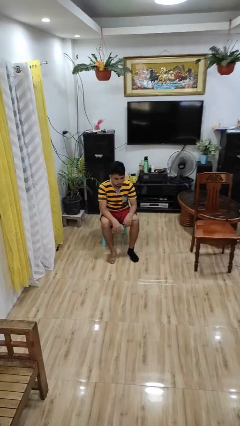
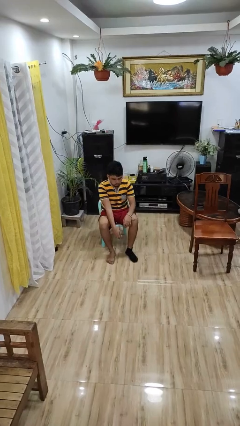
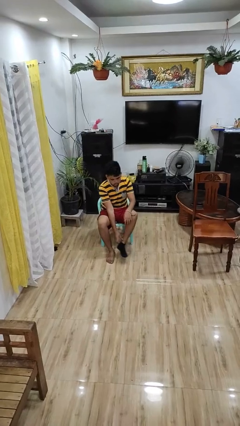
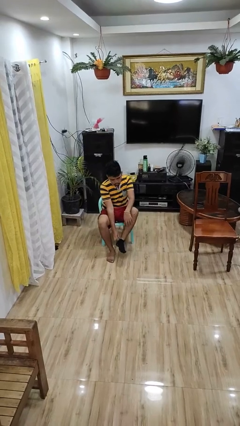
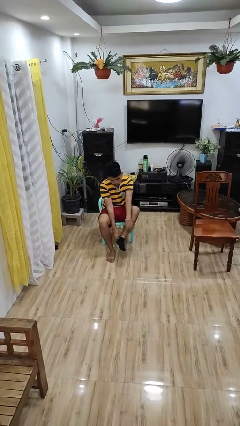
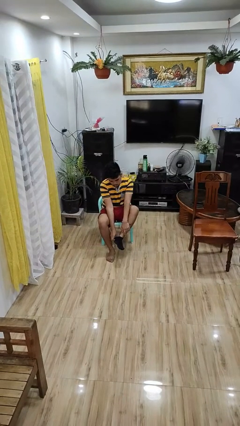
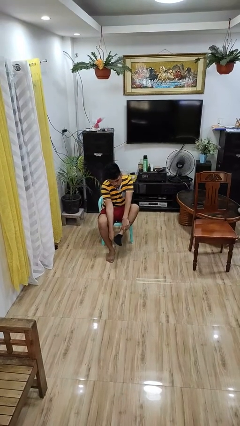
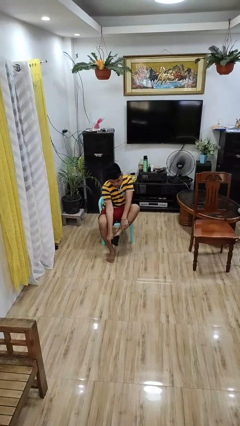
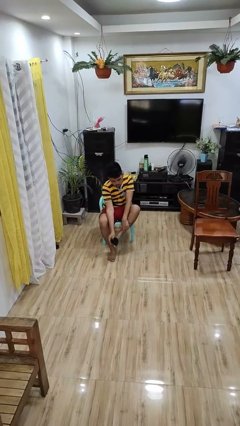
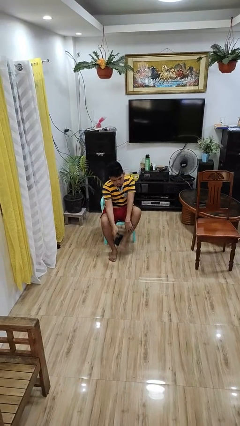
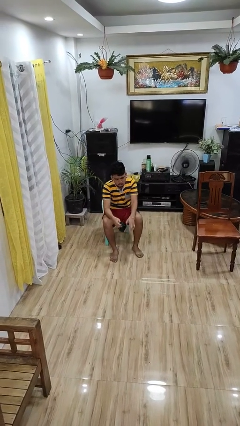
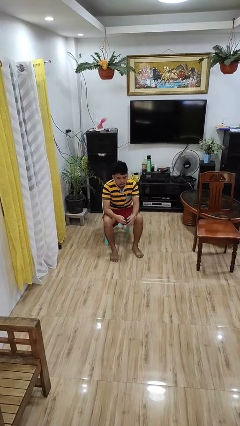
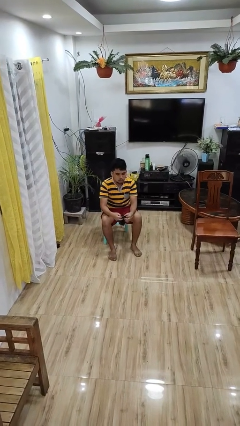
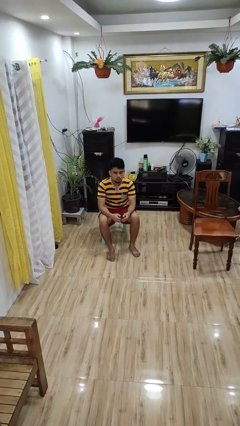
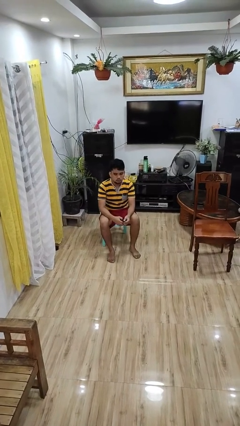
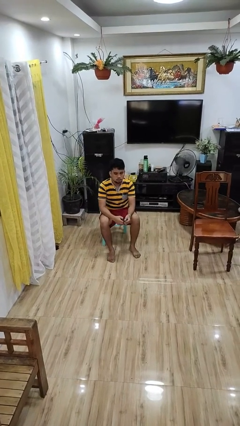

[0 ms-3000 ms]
person takes off socks

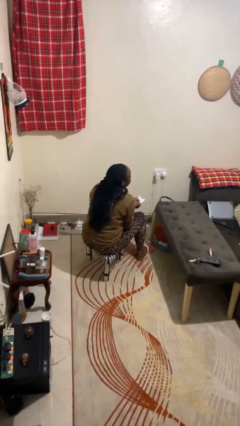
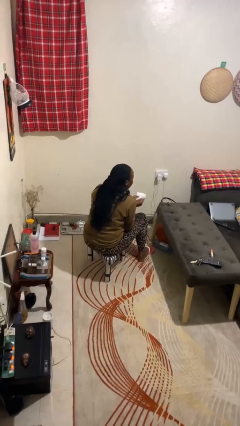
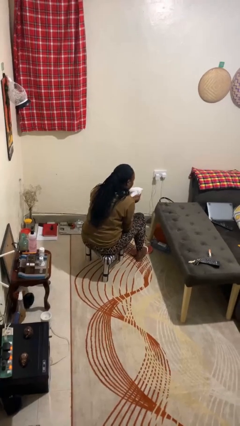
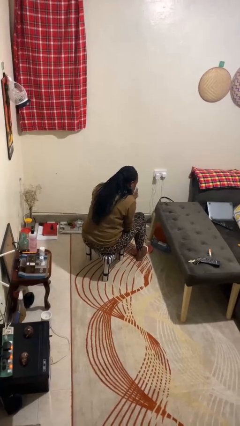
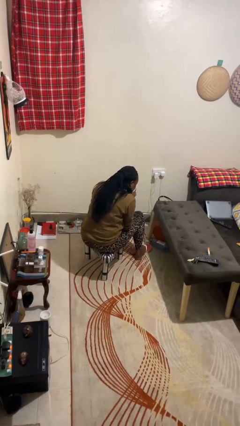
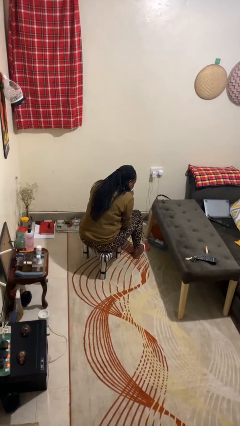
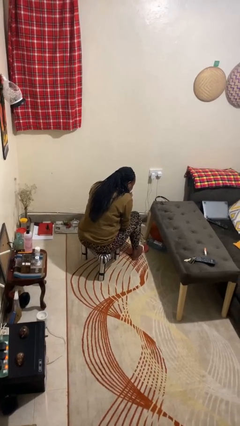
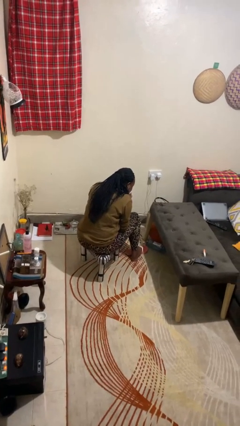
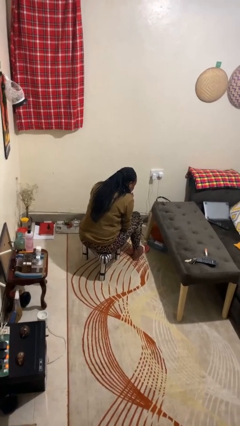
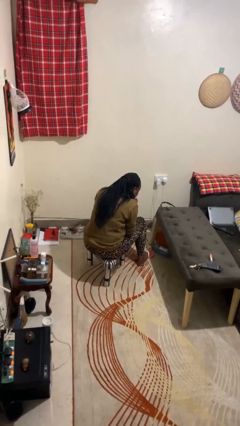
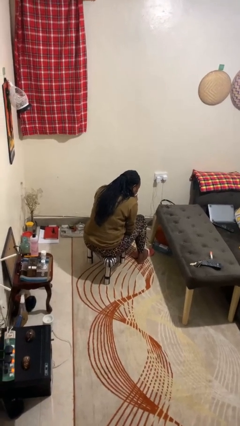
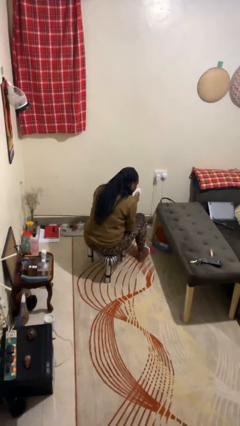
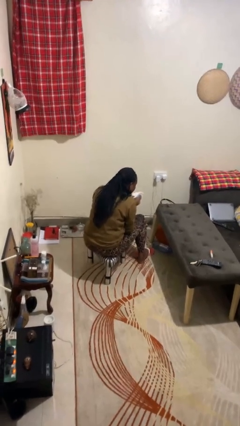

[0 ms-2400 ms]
person blows nose

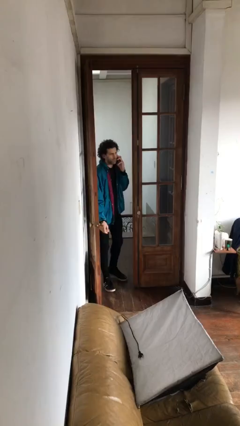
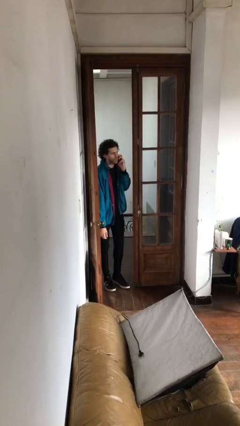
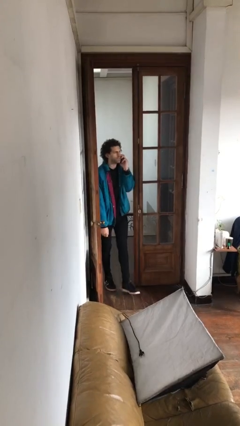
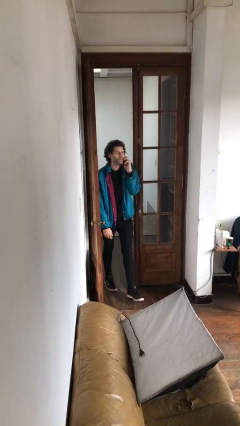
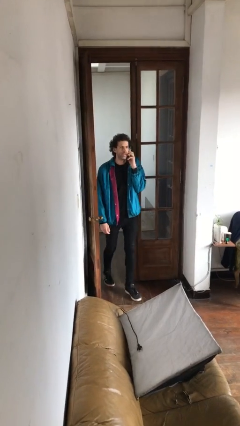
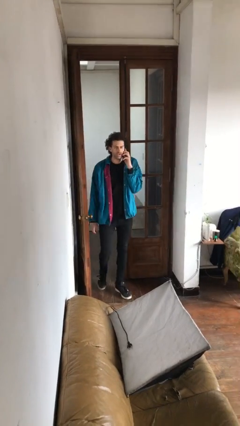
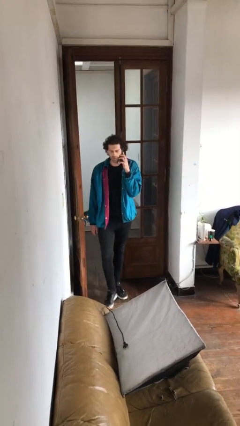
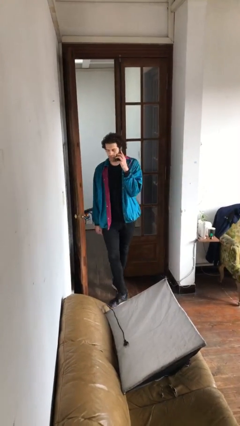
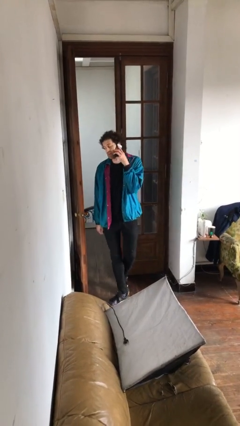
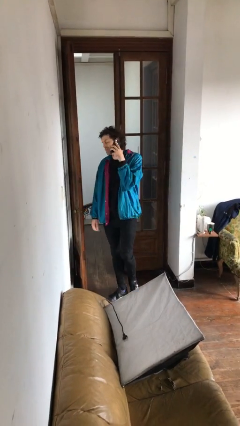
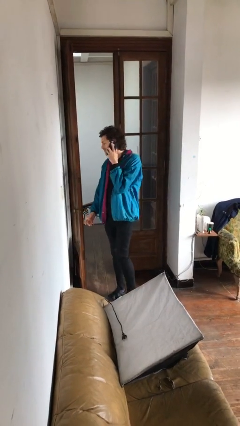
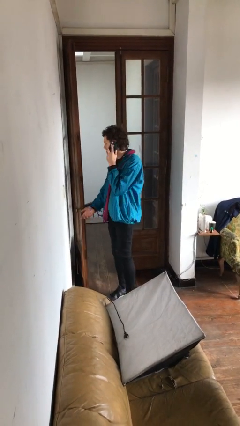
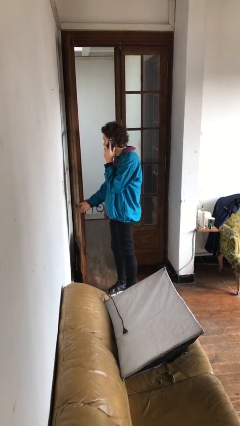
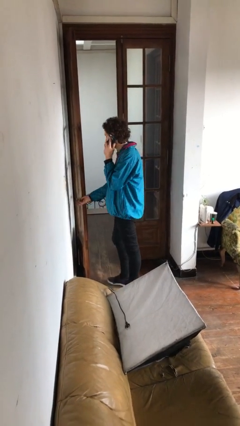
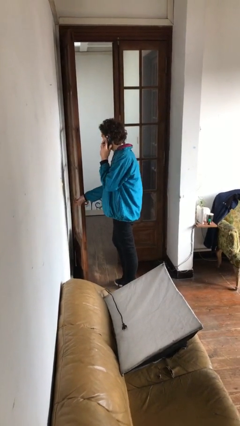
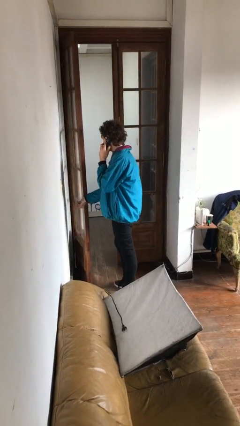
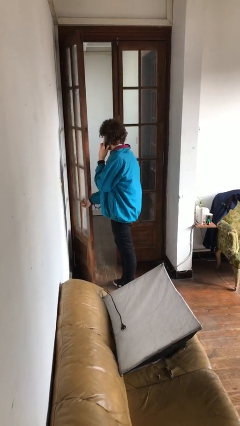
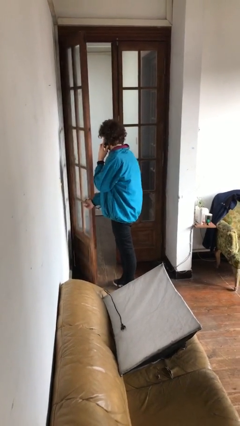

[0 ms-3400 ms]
person enters scene through structure

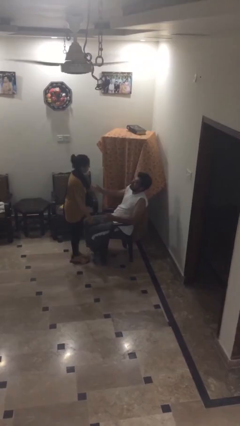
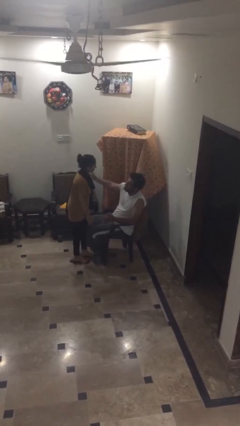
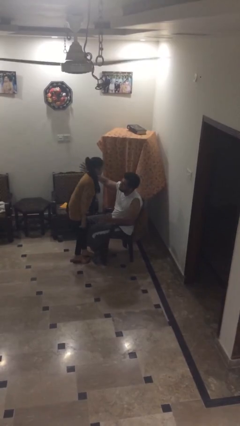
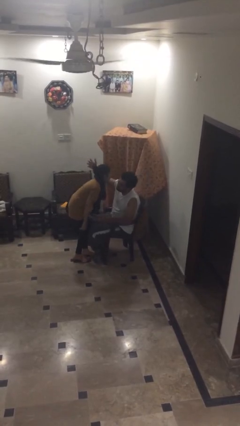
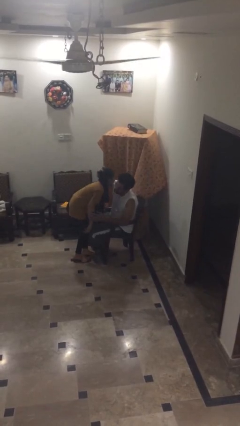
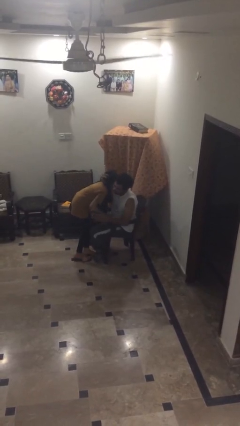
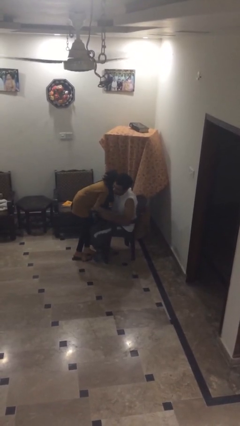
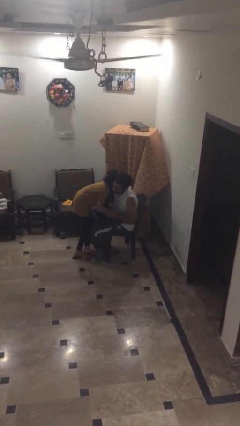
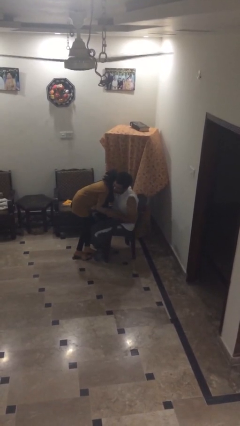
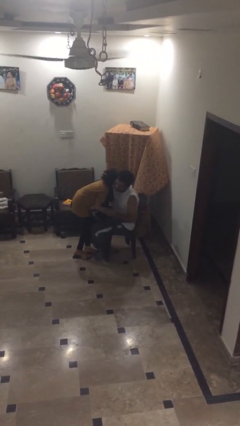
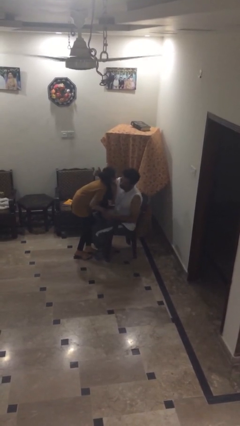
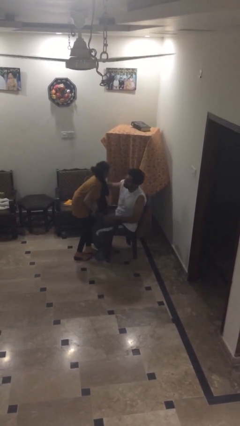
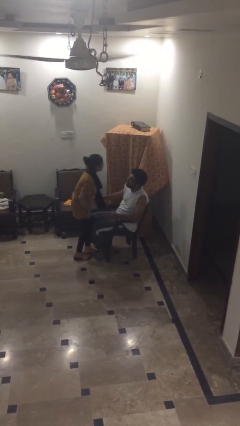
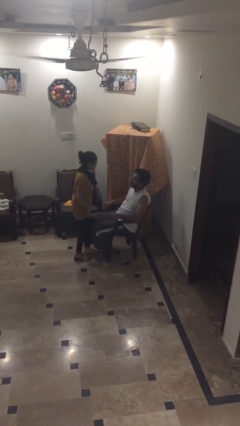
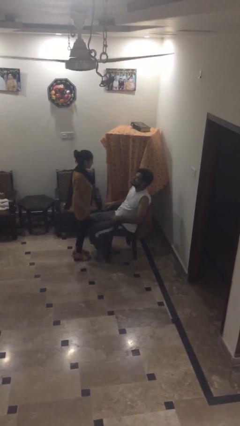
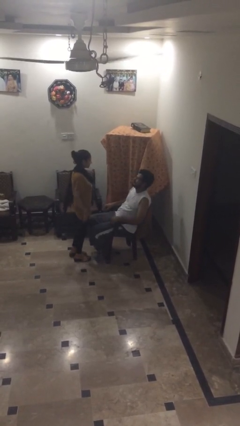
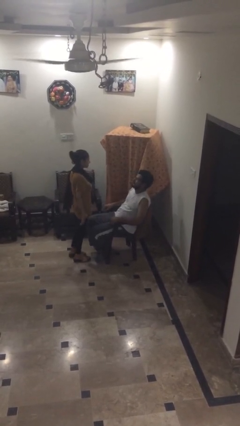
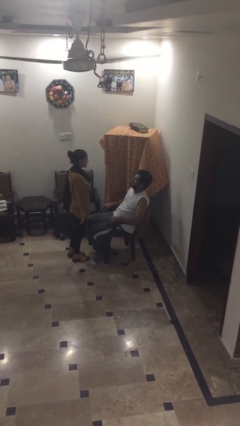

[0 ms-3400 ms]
person embraces person

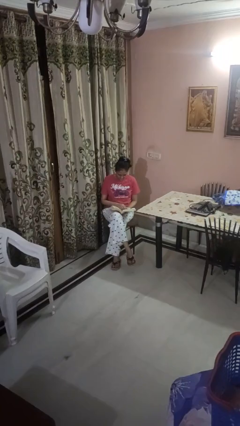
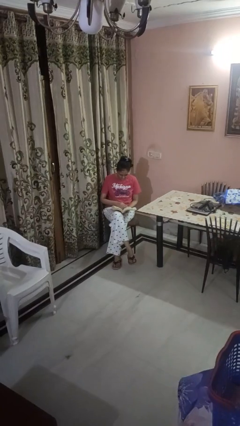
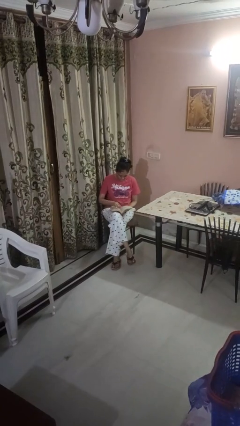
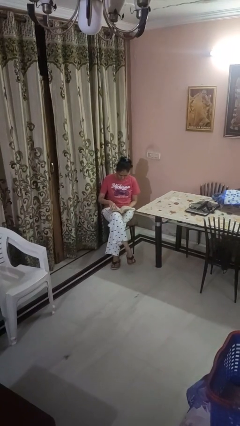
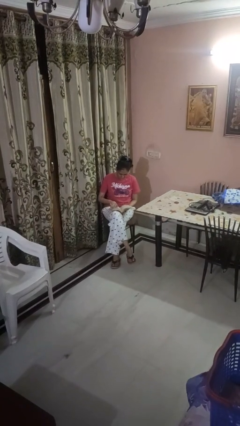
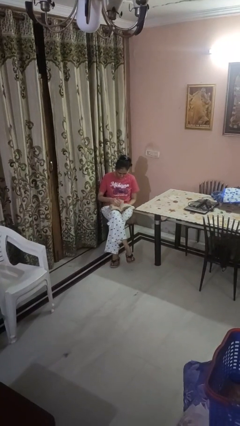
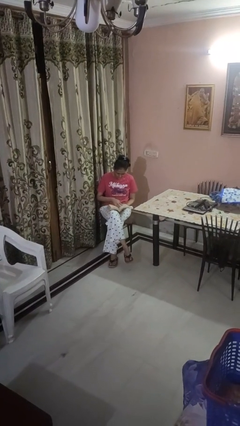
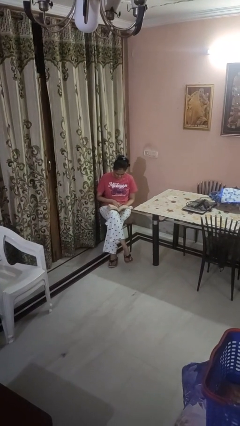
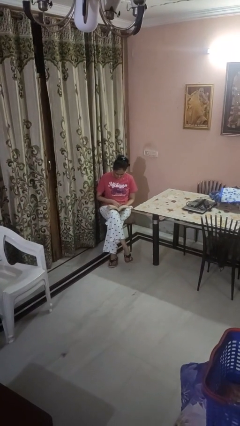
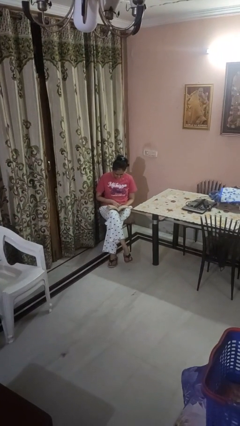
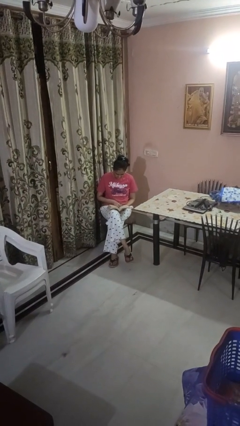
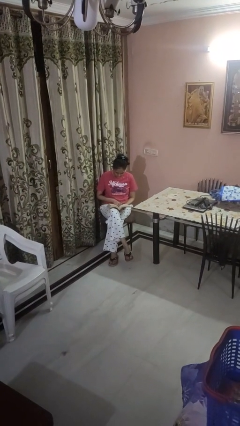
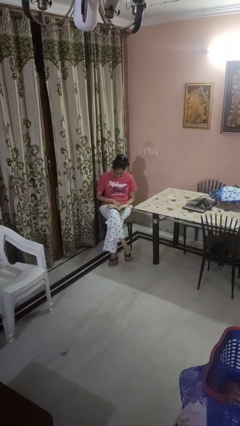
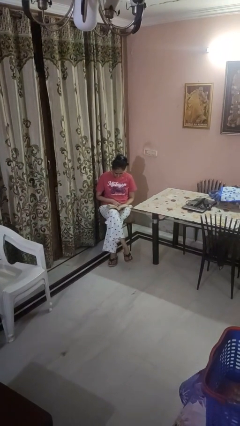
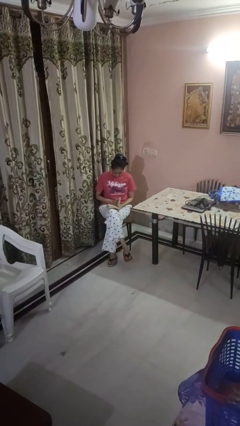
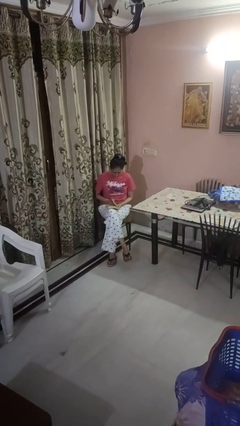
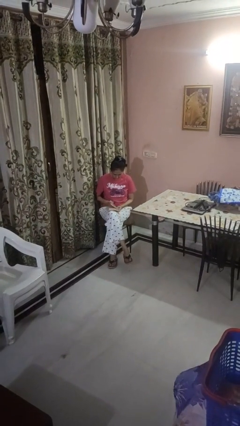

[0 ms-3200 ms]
person reads book

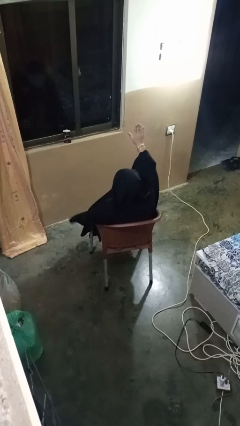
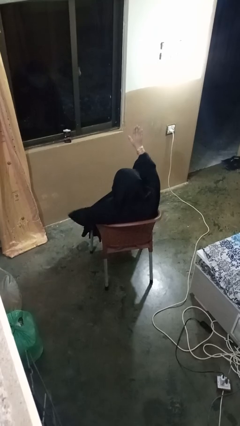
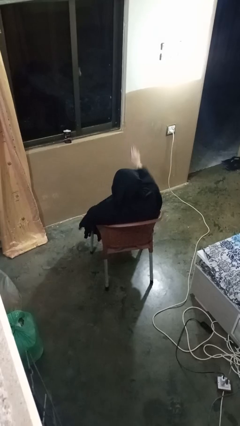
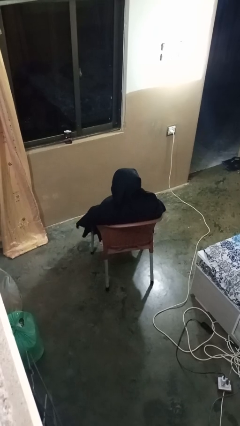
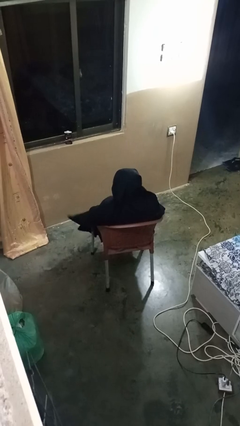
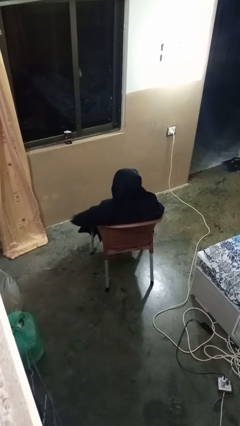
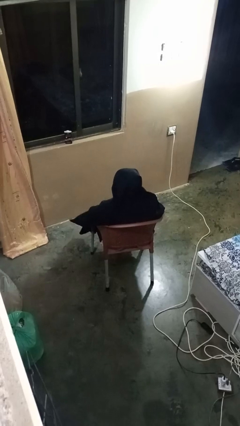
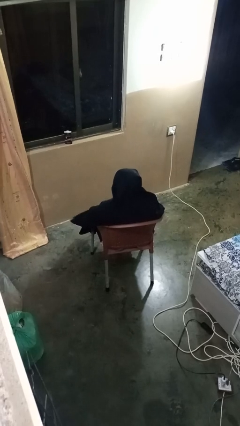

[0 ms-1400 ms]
person gestures lower hand

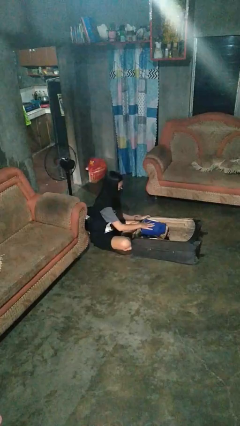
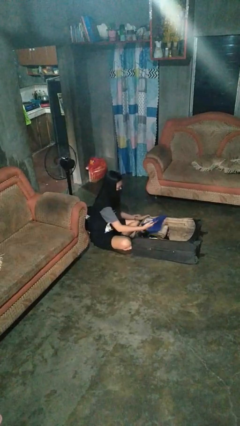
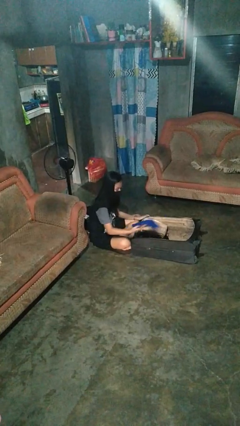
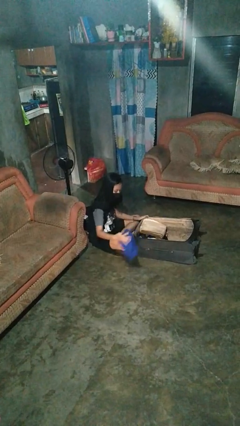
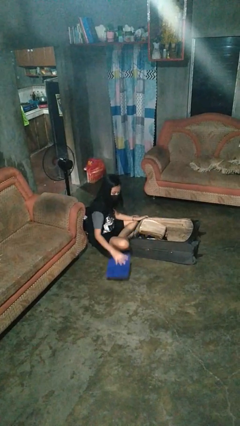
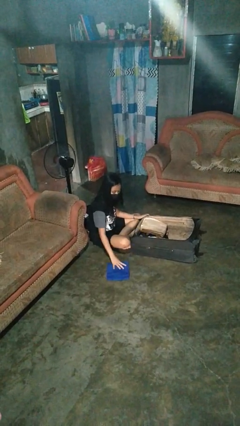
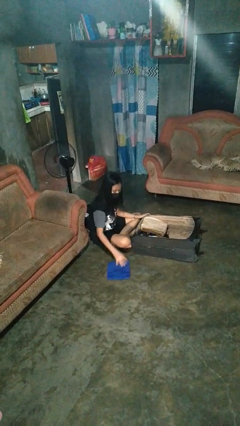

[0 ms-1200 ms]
person unloads clothes from suitcase
